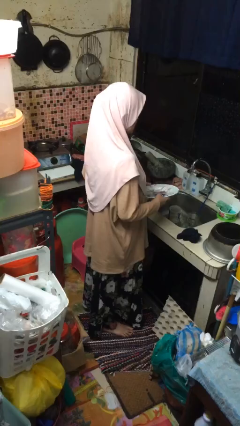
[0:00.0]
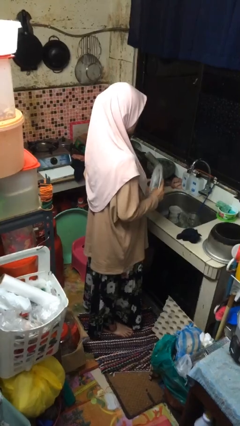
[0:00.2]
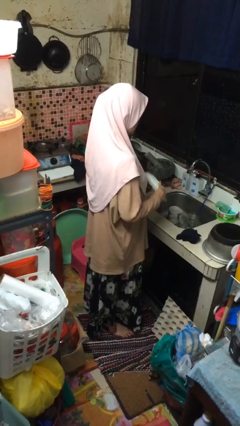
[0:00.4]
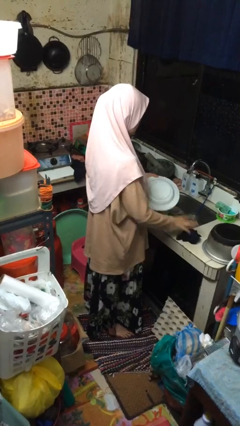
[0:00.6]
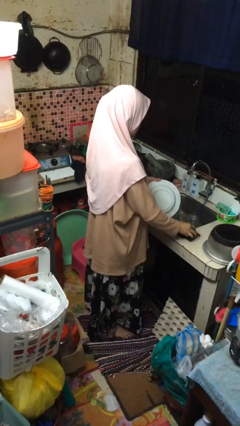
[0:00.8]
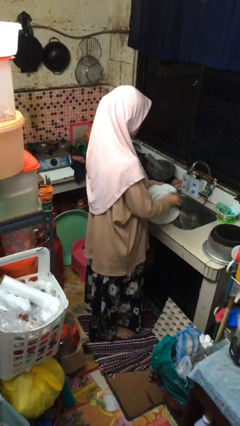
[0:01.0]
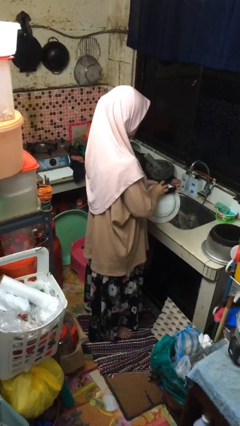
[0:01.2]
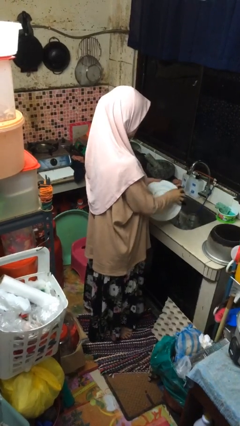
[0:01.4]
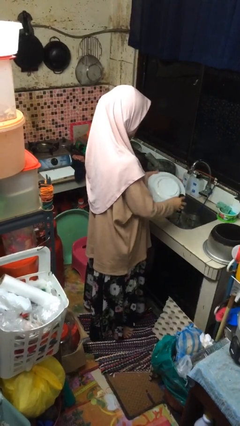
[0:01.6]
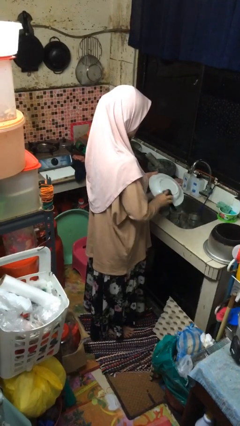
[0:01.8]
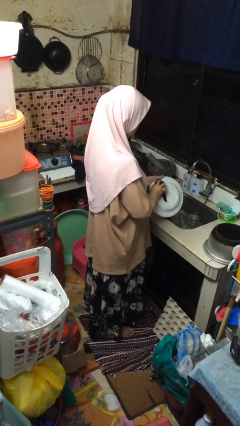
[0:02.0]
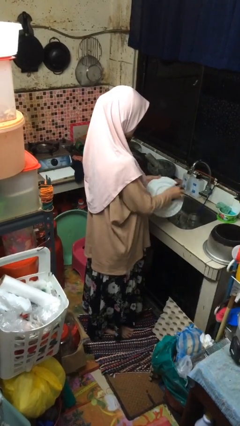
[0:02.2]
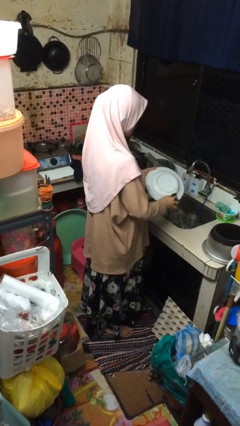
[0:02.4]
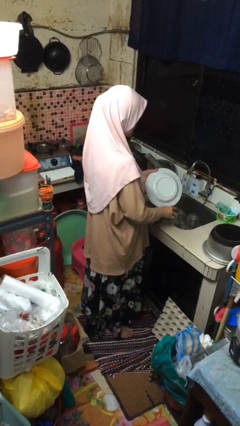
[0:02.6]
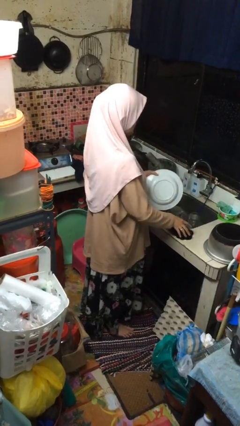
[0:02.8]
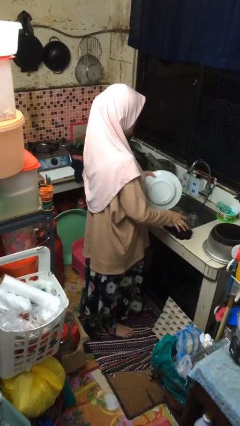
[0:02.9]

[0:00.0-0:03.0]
person dries dish

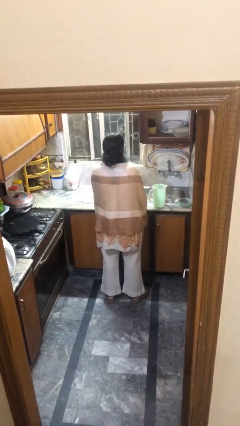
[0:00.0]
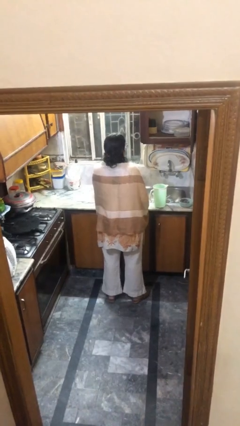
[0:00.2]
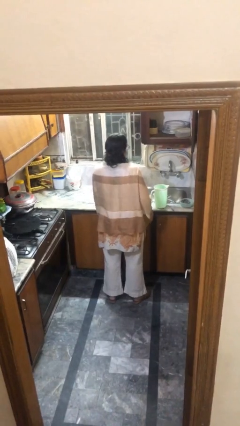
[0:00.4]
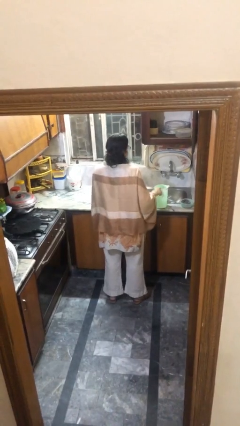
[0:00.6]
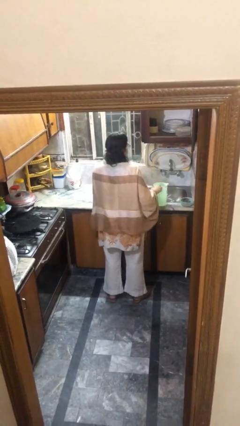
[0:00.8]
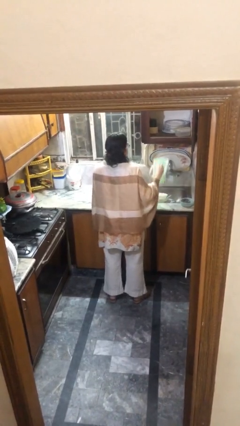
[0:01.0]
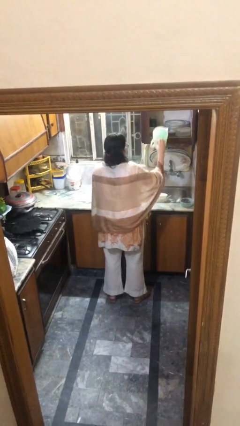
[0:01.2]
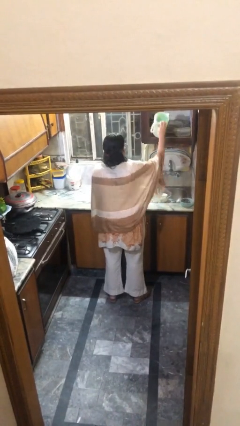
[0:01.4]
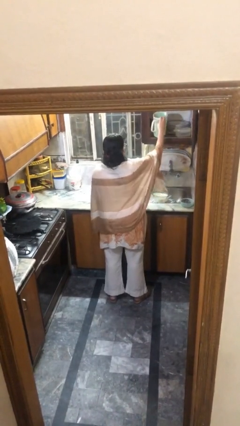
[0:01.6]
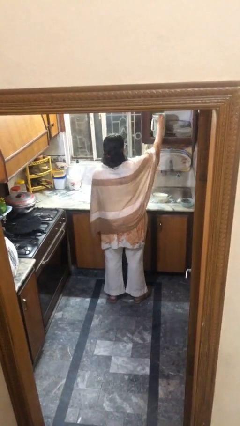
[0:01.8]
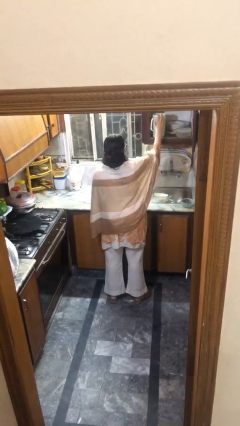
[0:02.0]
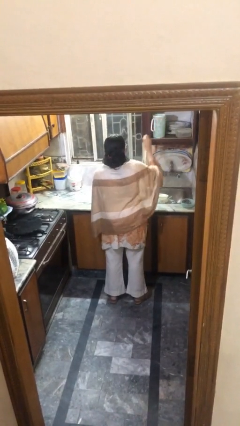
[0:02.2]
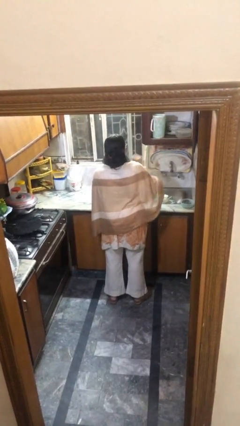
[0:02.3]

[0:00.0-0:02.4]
person puts object into kitchen drawer

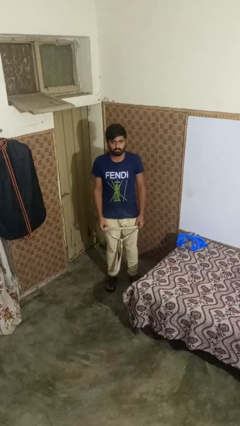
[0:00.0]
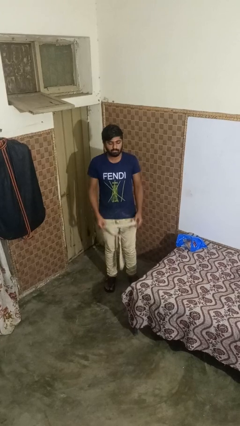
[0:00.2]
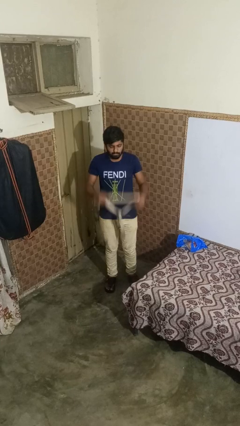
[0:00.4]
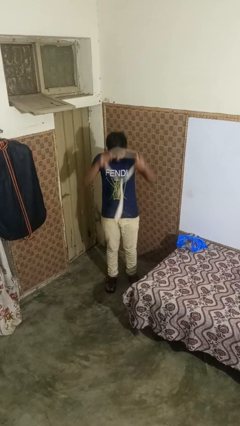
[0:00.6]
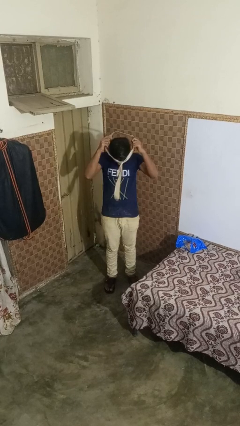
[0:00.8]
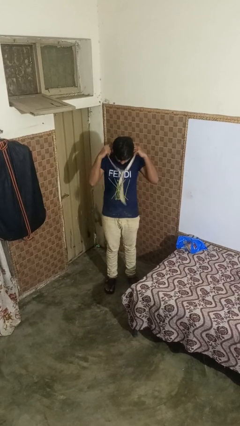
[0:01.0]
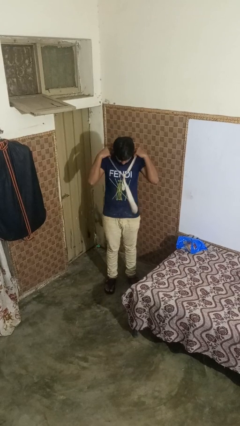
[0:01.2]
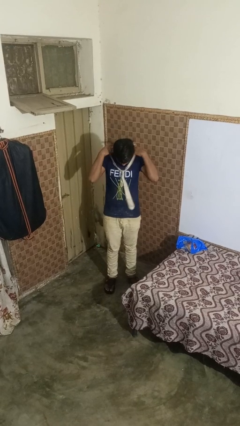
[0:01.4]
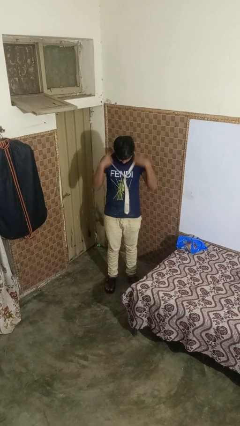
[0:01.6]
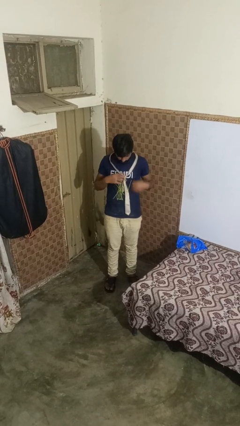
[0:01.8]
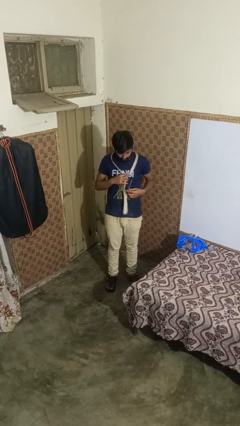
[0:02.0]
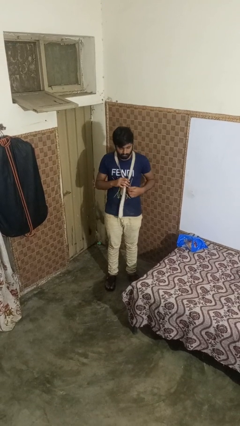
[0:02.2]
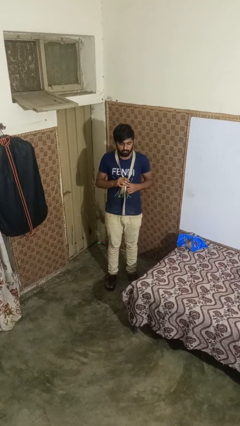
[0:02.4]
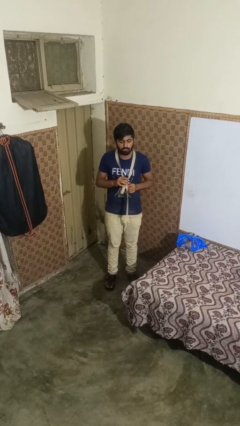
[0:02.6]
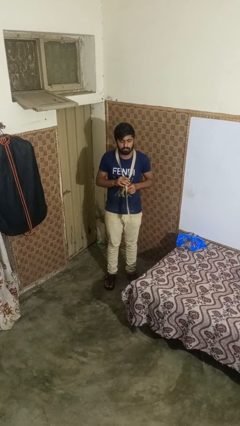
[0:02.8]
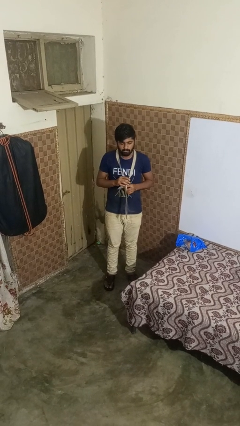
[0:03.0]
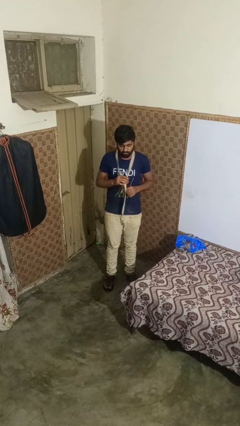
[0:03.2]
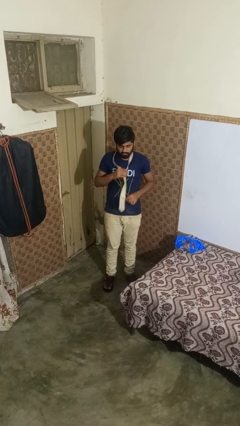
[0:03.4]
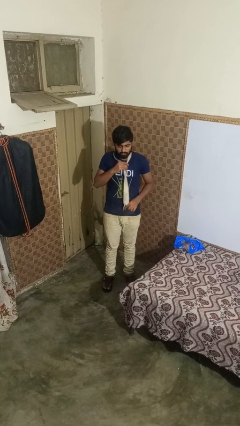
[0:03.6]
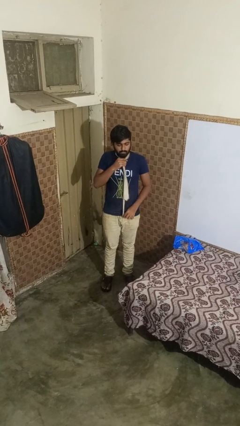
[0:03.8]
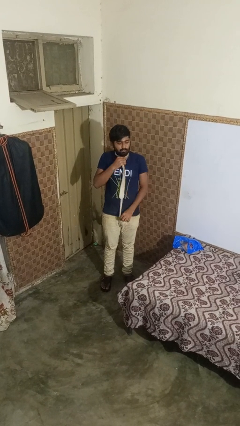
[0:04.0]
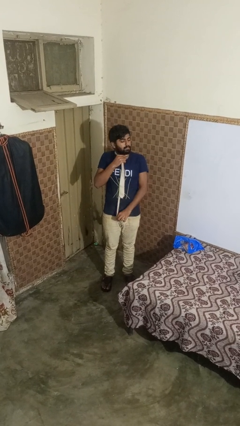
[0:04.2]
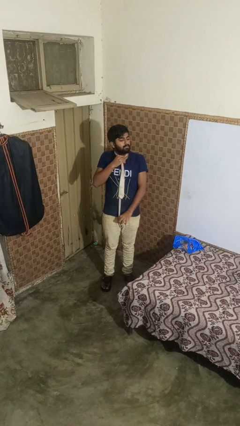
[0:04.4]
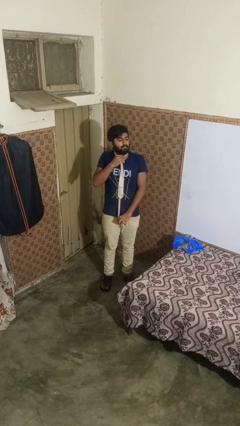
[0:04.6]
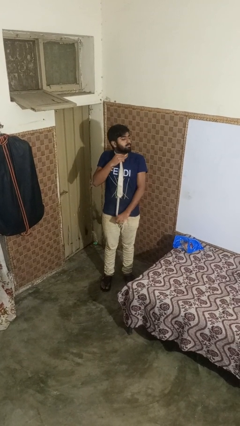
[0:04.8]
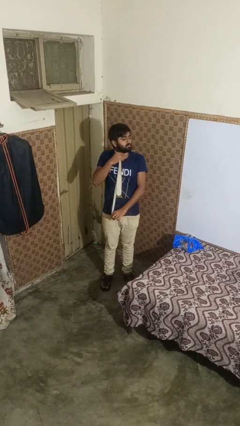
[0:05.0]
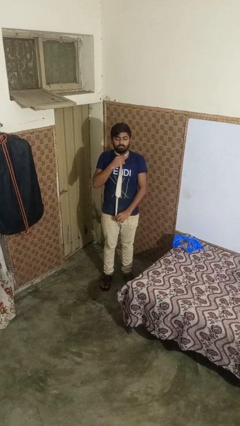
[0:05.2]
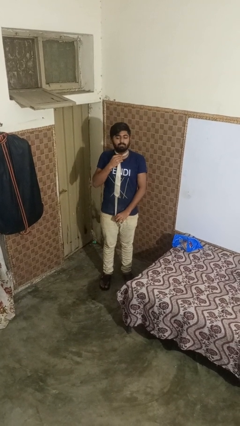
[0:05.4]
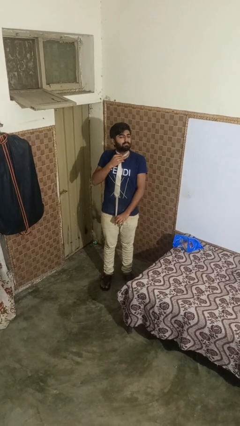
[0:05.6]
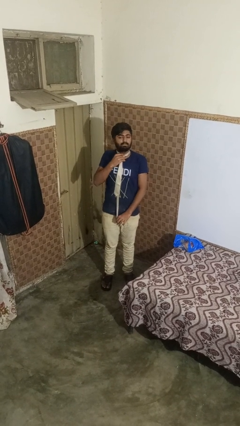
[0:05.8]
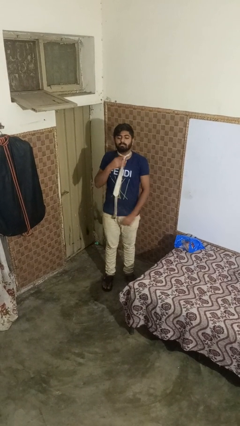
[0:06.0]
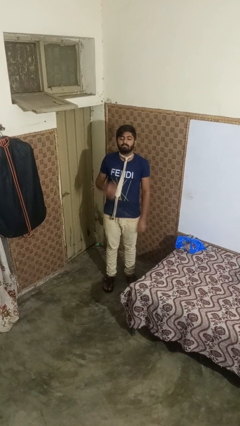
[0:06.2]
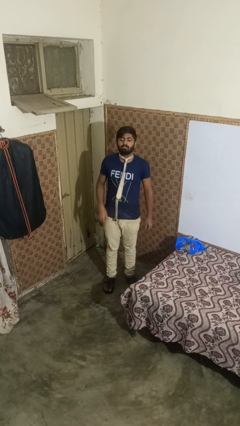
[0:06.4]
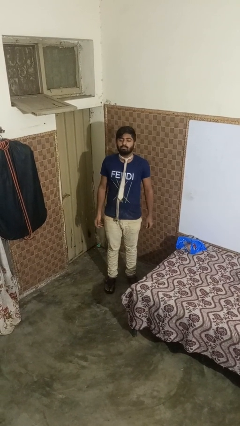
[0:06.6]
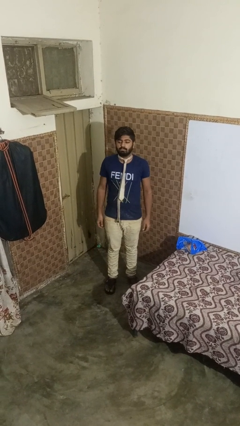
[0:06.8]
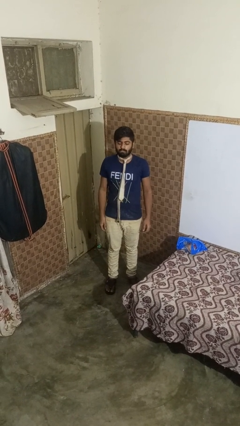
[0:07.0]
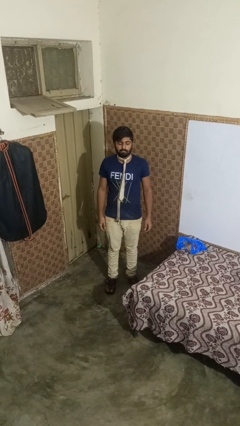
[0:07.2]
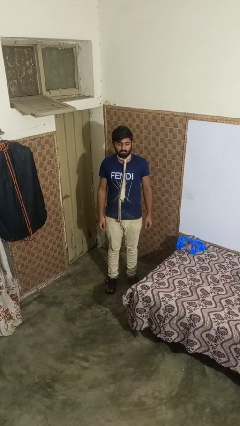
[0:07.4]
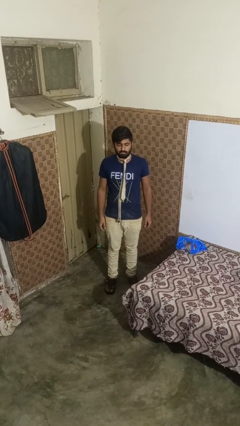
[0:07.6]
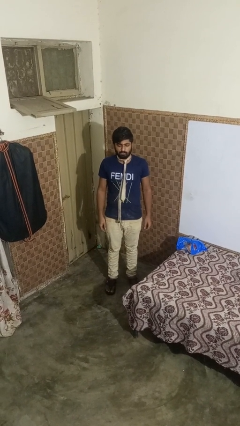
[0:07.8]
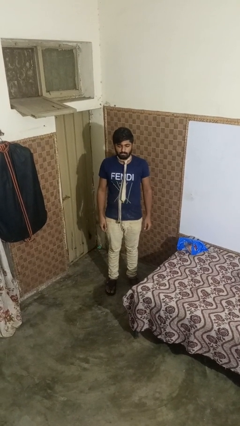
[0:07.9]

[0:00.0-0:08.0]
person puts on necktie

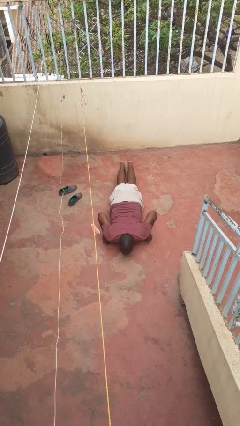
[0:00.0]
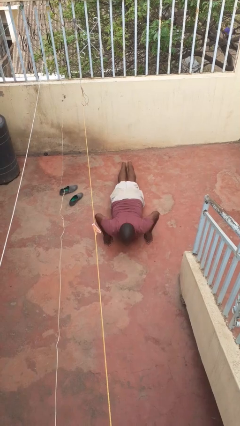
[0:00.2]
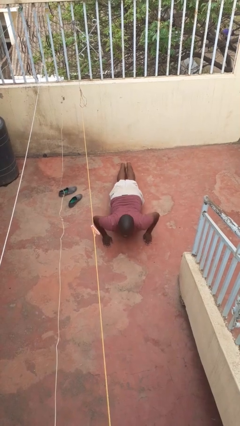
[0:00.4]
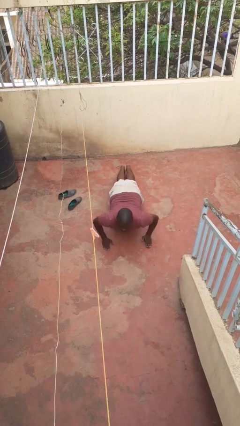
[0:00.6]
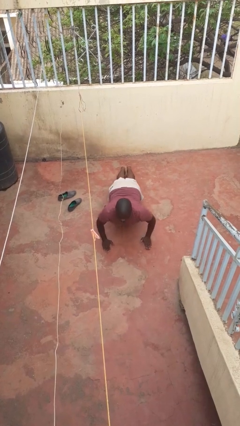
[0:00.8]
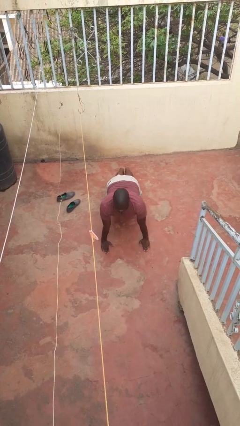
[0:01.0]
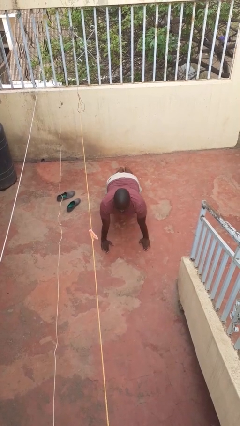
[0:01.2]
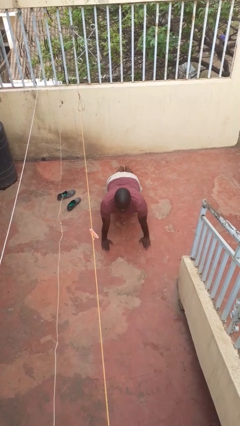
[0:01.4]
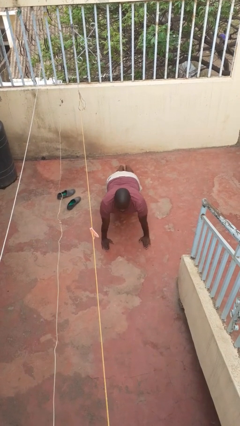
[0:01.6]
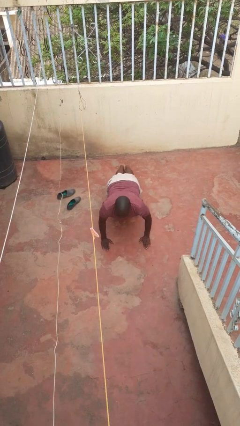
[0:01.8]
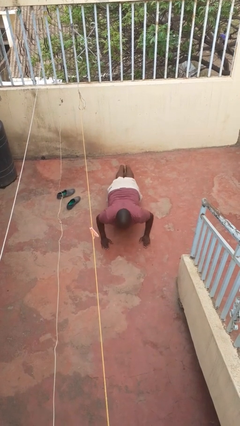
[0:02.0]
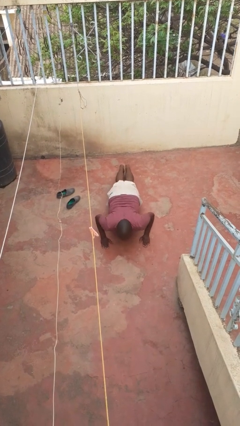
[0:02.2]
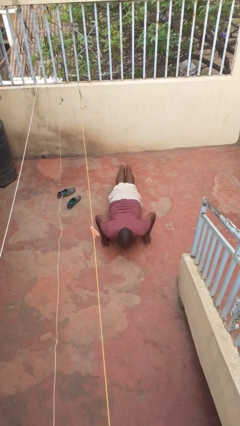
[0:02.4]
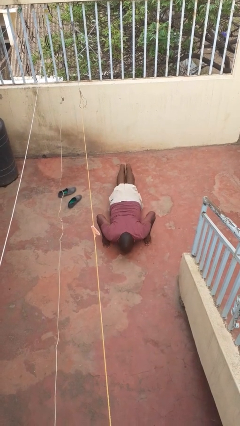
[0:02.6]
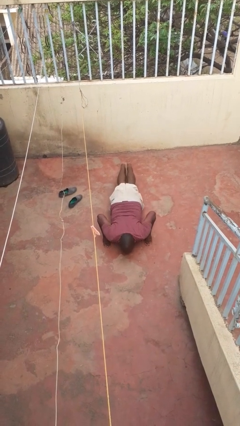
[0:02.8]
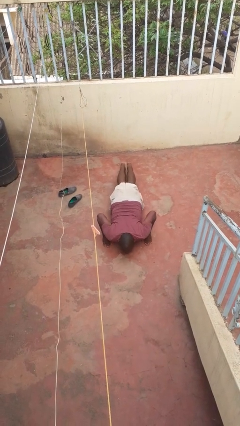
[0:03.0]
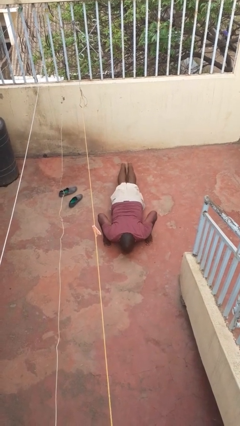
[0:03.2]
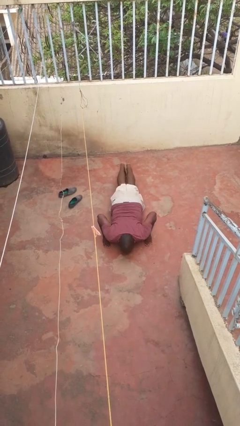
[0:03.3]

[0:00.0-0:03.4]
person exercises with pushup

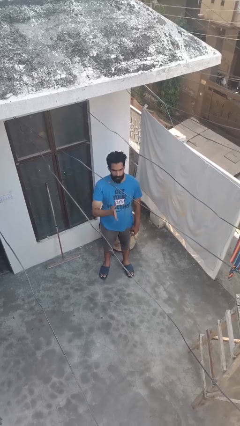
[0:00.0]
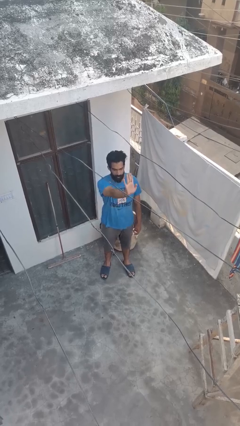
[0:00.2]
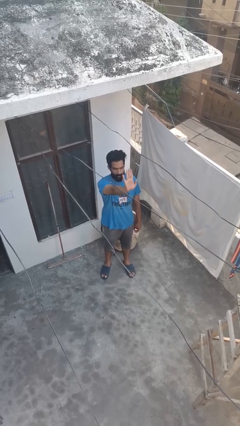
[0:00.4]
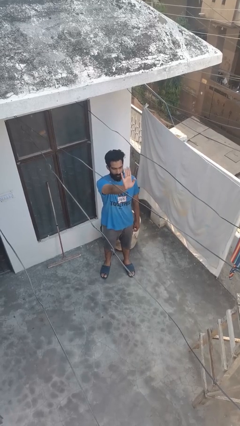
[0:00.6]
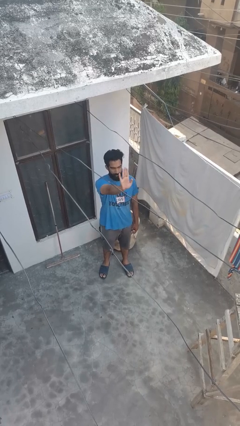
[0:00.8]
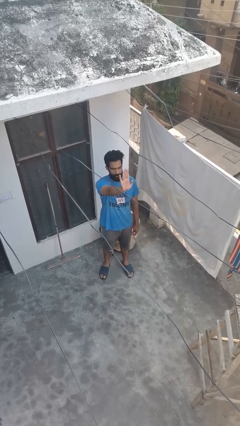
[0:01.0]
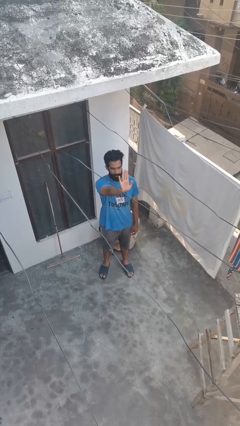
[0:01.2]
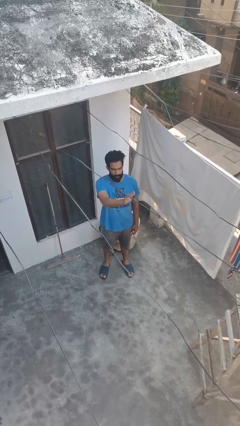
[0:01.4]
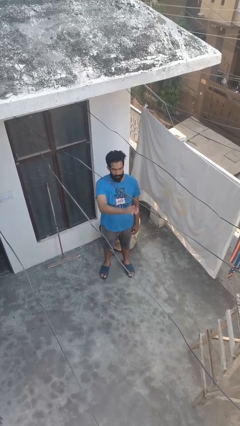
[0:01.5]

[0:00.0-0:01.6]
person gestures stop
